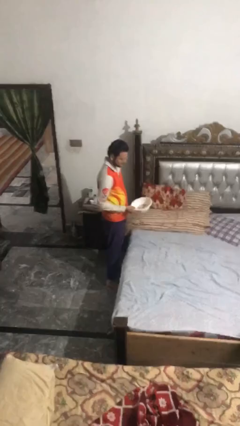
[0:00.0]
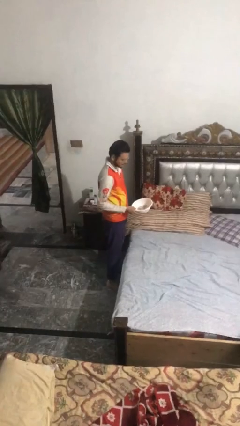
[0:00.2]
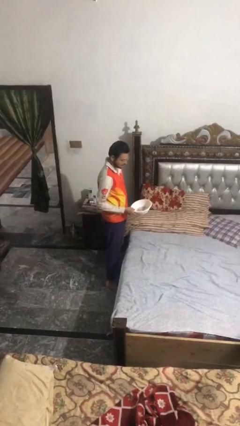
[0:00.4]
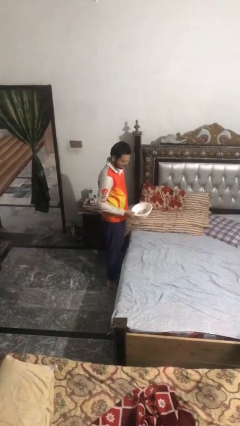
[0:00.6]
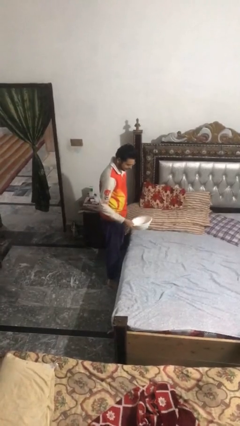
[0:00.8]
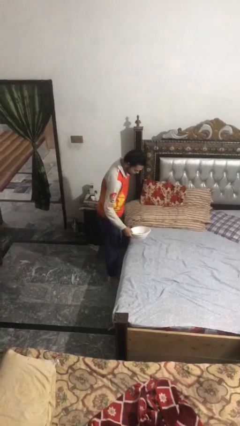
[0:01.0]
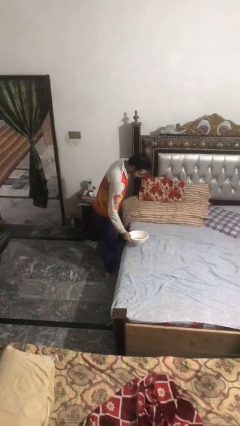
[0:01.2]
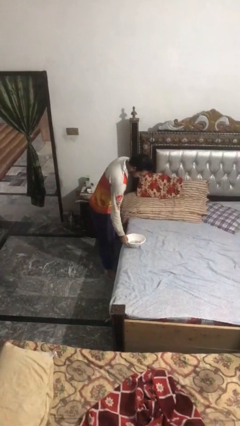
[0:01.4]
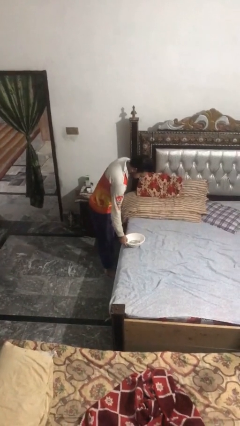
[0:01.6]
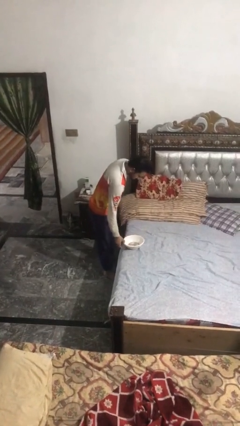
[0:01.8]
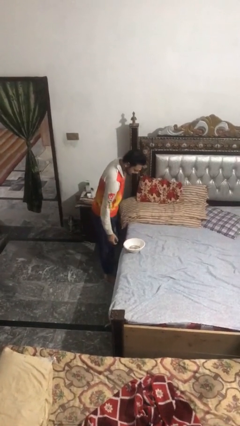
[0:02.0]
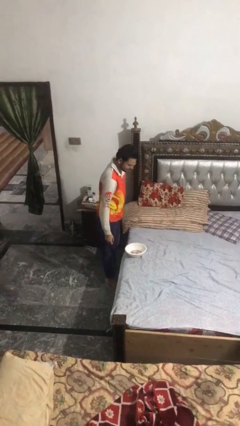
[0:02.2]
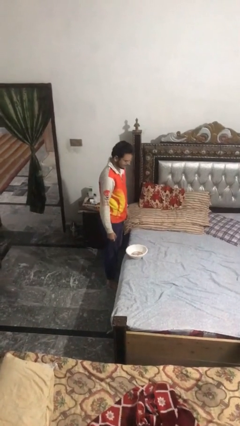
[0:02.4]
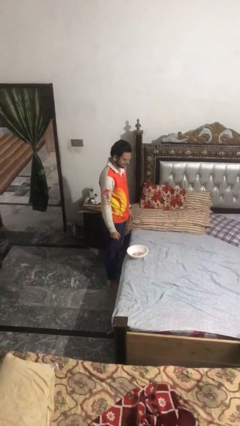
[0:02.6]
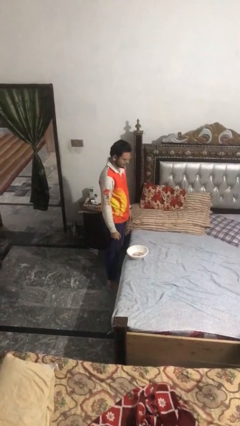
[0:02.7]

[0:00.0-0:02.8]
person puts down object on countertop

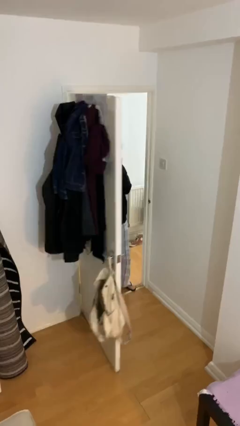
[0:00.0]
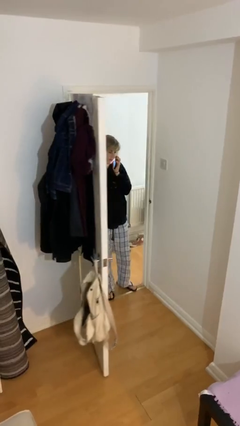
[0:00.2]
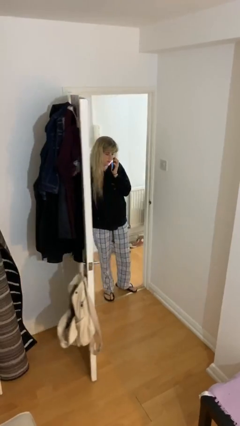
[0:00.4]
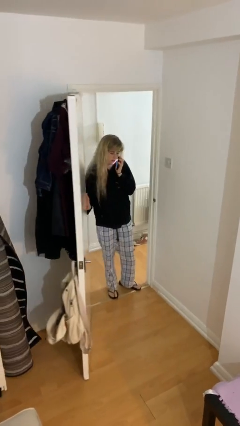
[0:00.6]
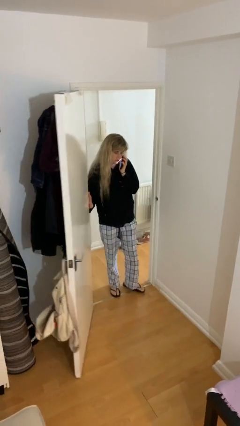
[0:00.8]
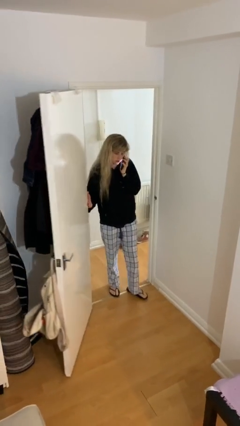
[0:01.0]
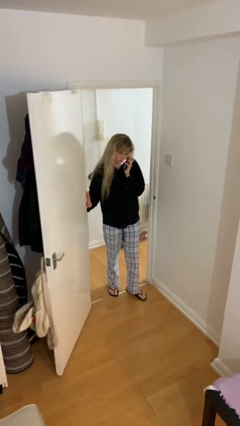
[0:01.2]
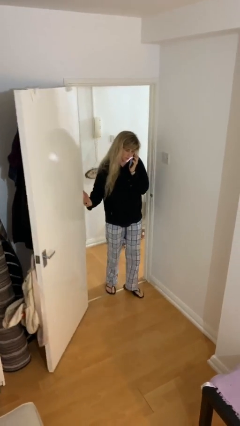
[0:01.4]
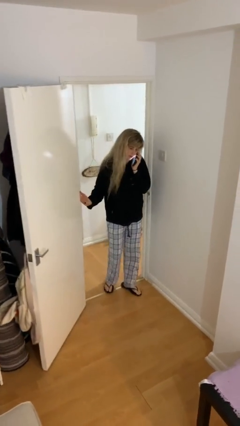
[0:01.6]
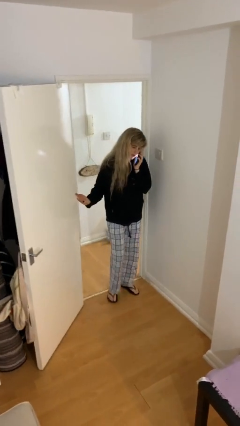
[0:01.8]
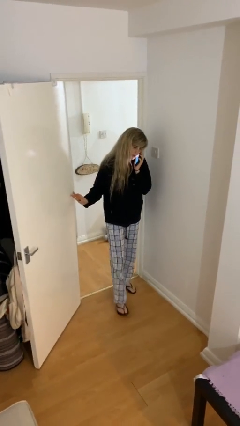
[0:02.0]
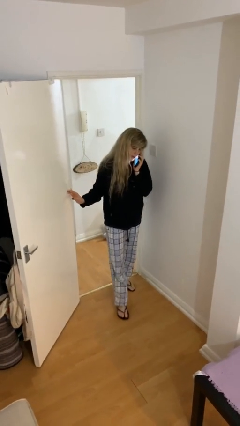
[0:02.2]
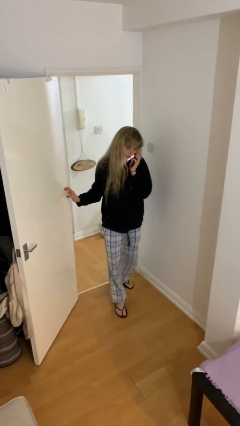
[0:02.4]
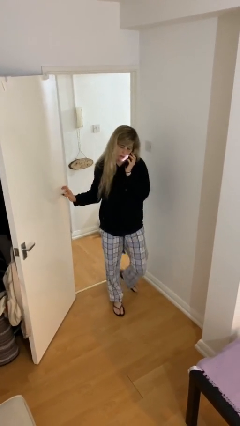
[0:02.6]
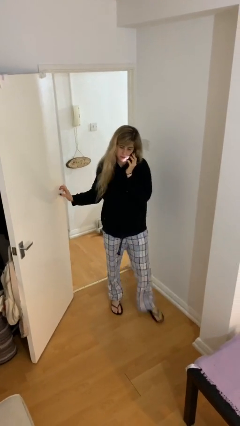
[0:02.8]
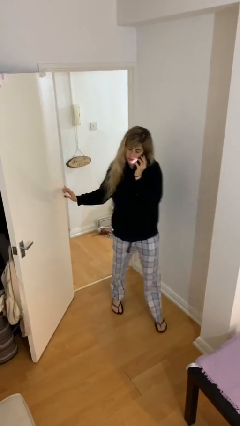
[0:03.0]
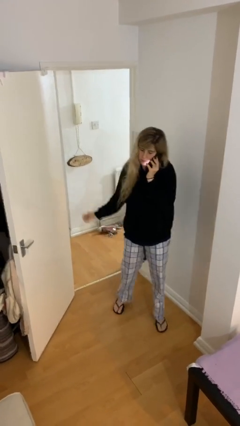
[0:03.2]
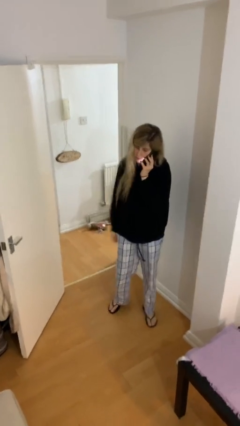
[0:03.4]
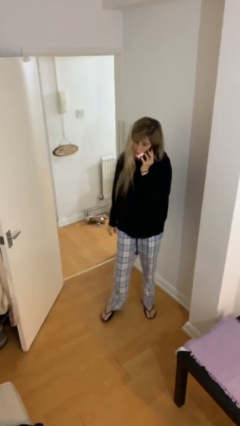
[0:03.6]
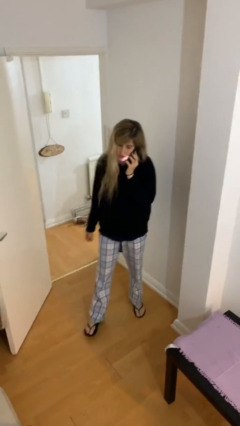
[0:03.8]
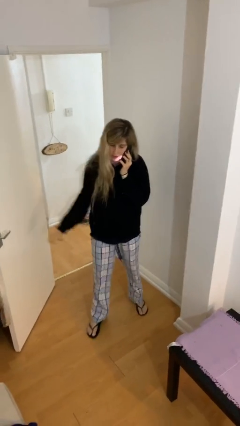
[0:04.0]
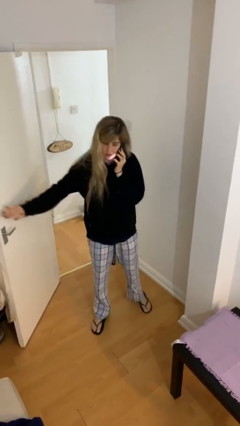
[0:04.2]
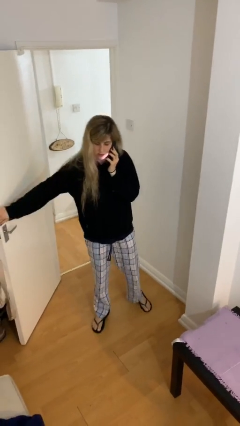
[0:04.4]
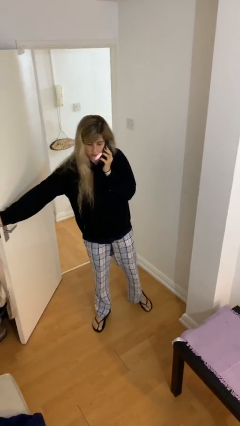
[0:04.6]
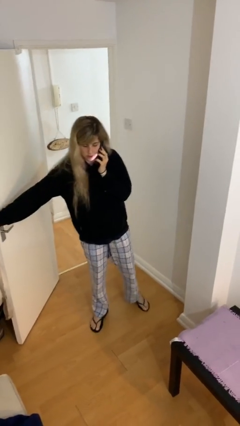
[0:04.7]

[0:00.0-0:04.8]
person enters scene through structure

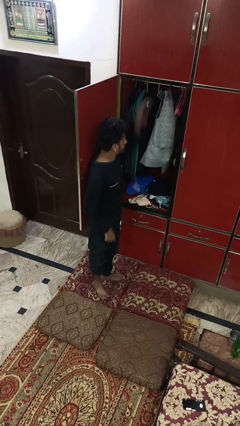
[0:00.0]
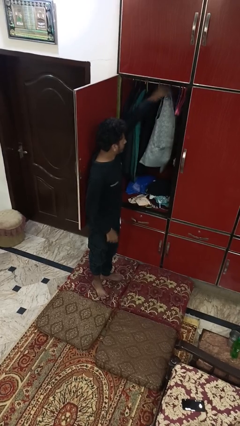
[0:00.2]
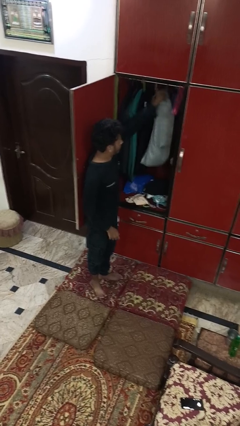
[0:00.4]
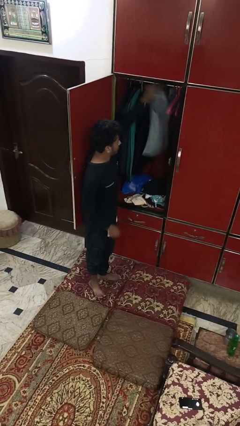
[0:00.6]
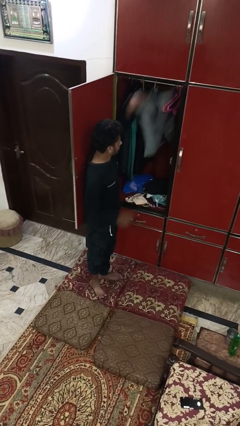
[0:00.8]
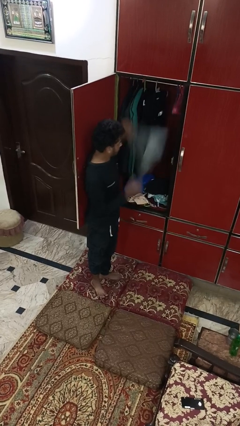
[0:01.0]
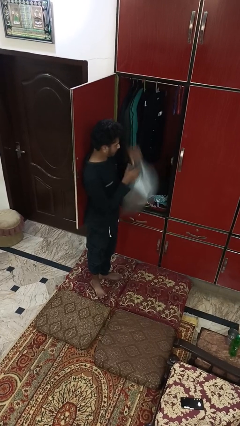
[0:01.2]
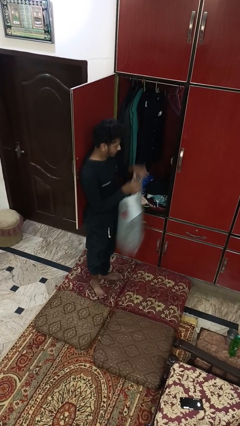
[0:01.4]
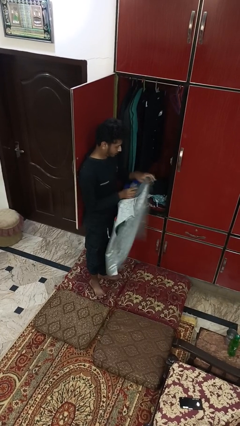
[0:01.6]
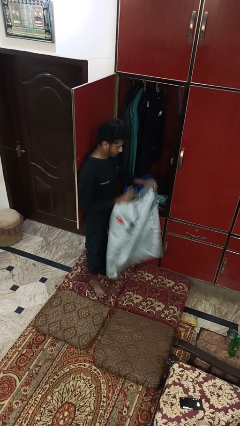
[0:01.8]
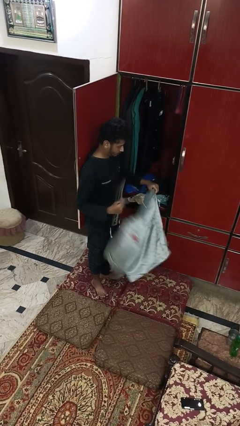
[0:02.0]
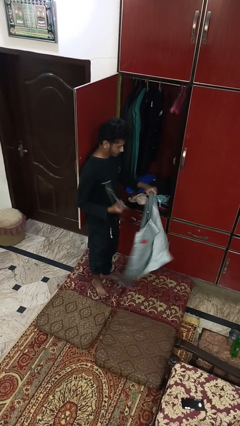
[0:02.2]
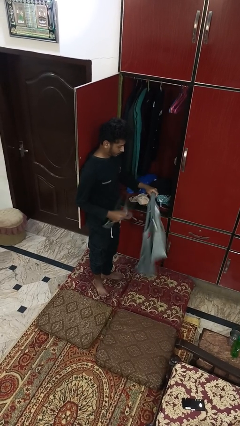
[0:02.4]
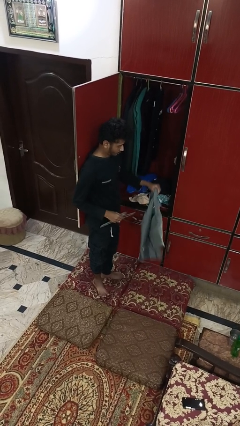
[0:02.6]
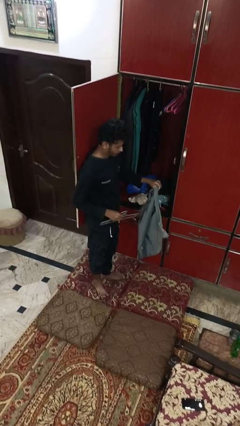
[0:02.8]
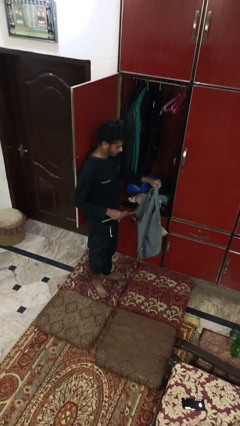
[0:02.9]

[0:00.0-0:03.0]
person takes clothes from closet

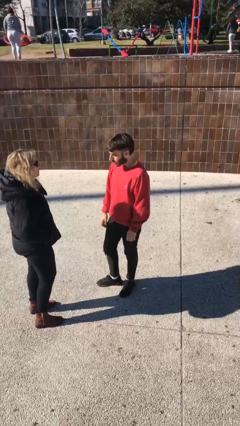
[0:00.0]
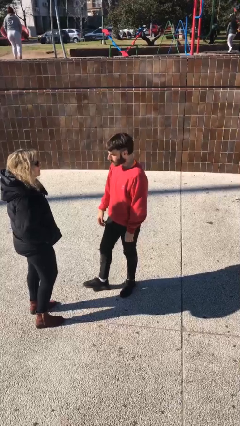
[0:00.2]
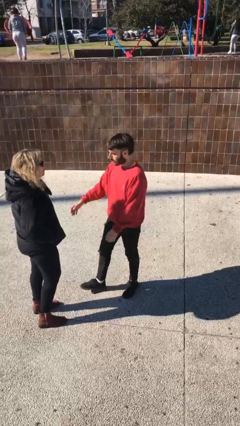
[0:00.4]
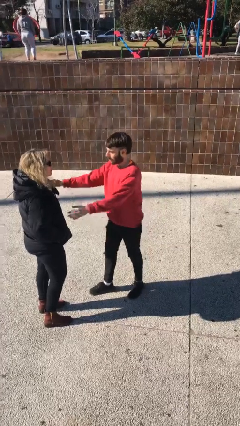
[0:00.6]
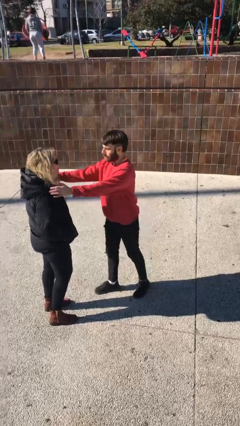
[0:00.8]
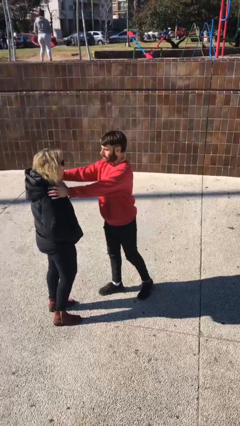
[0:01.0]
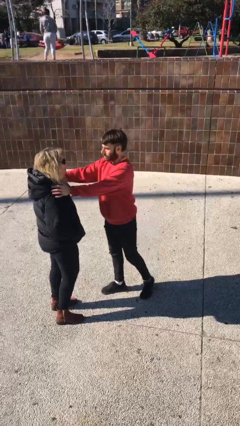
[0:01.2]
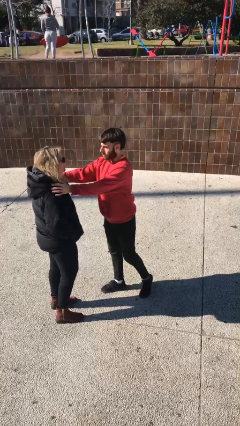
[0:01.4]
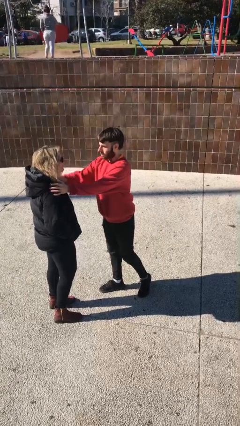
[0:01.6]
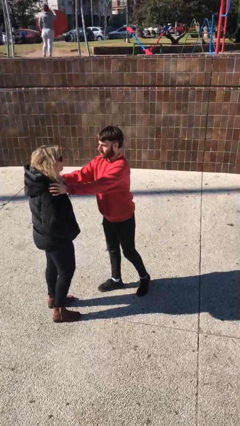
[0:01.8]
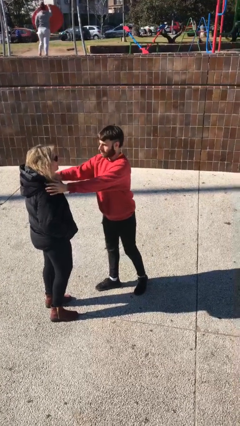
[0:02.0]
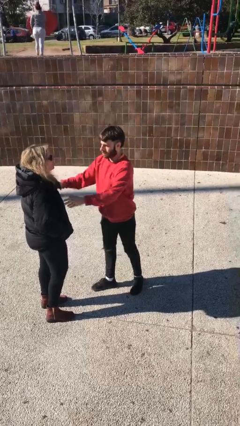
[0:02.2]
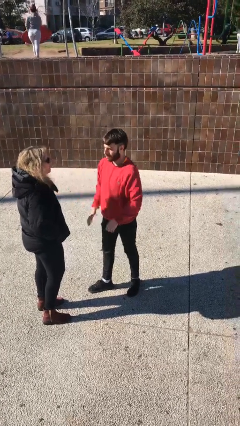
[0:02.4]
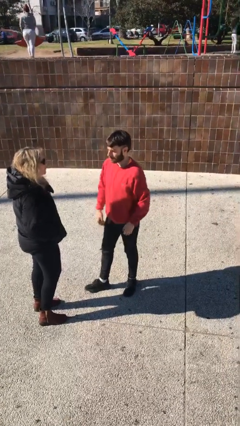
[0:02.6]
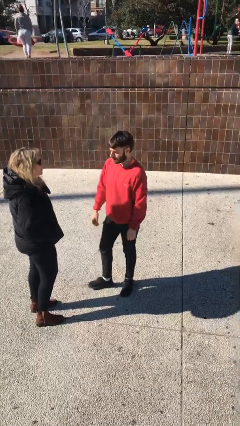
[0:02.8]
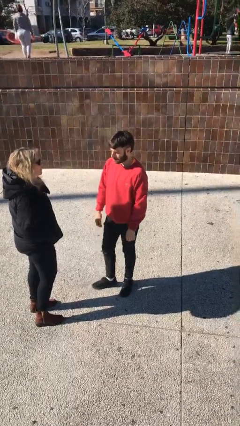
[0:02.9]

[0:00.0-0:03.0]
person pounds shoulders of person

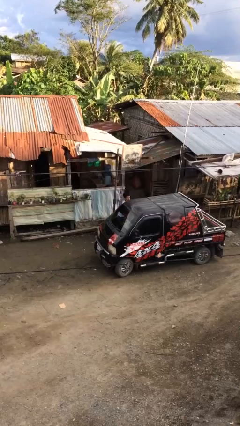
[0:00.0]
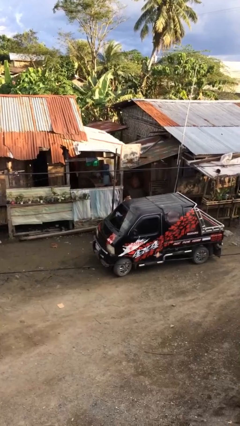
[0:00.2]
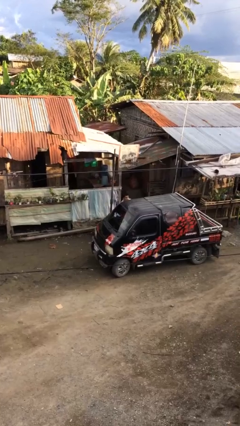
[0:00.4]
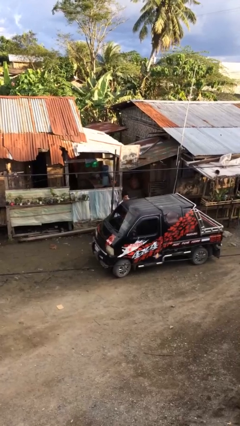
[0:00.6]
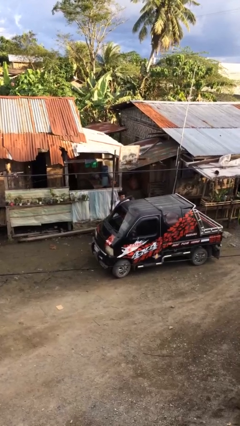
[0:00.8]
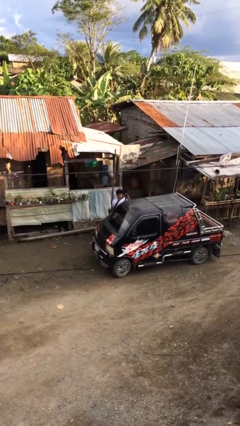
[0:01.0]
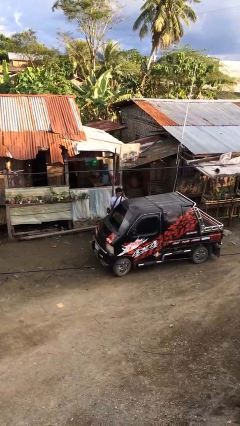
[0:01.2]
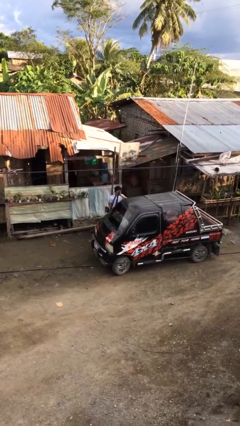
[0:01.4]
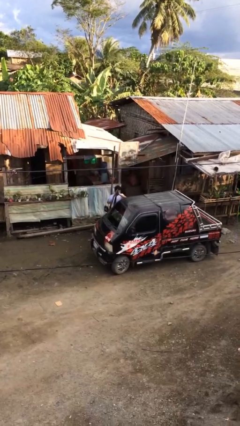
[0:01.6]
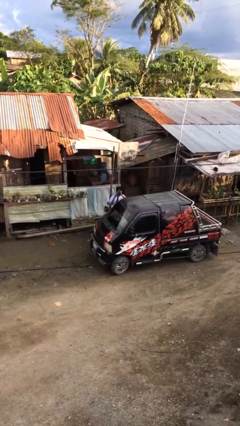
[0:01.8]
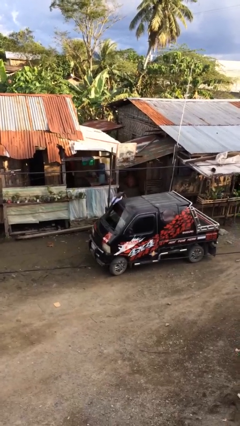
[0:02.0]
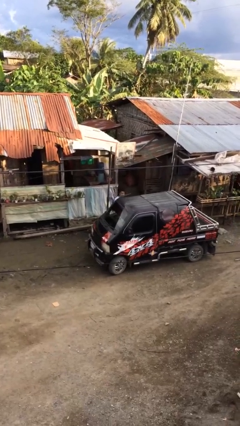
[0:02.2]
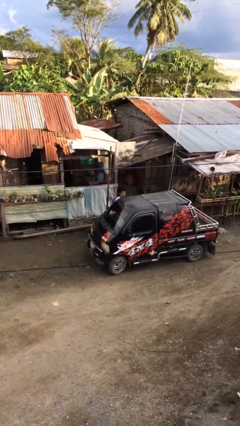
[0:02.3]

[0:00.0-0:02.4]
person opens car door

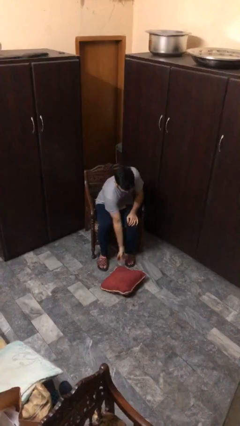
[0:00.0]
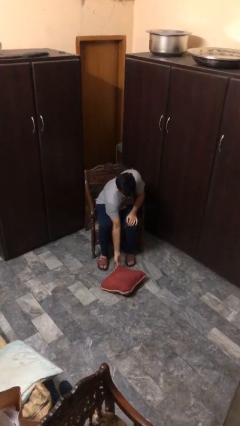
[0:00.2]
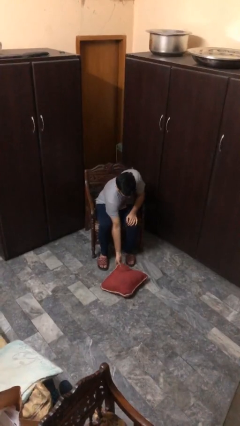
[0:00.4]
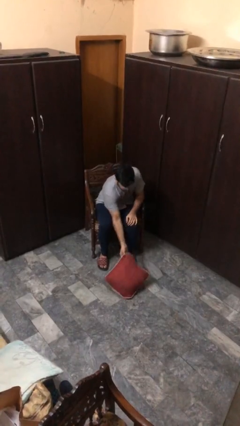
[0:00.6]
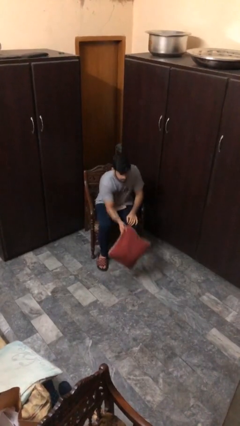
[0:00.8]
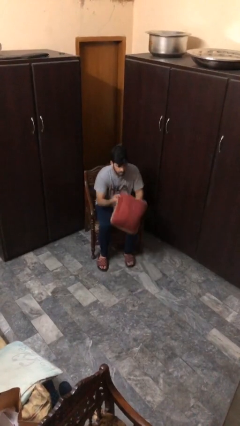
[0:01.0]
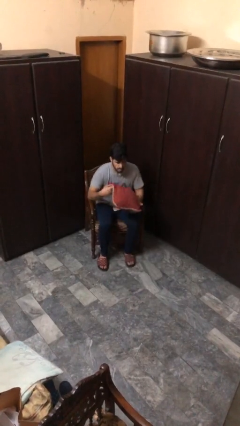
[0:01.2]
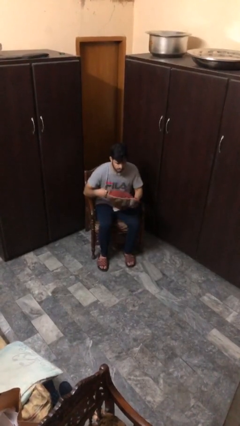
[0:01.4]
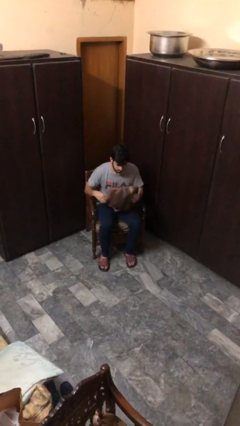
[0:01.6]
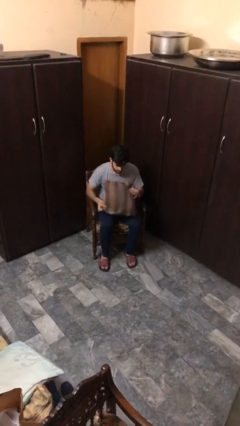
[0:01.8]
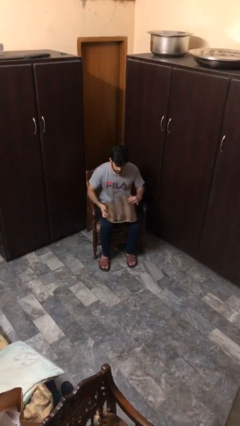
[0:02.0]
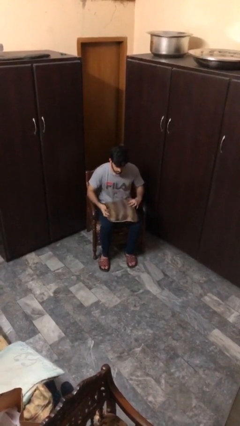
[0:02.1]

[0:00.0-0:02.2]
person picks up object from floor
